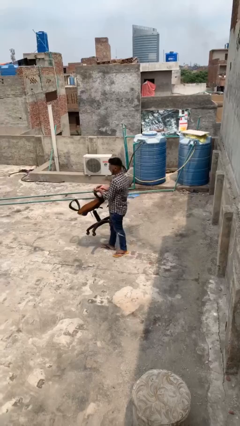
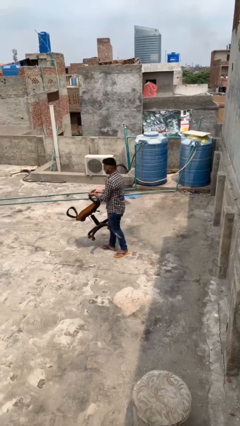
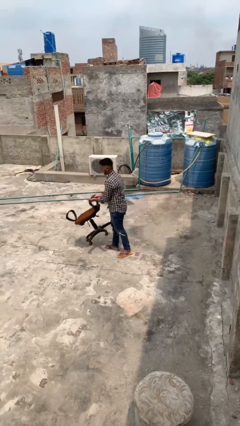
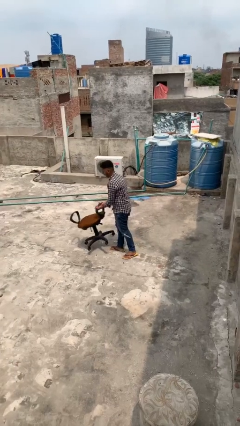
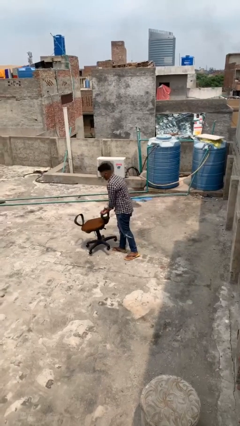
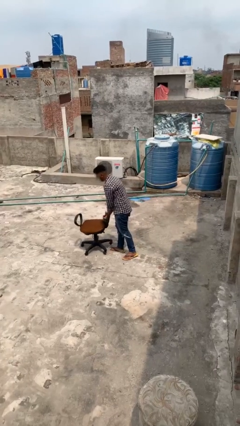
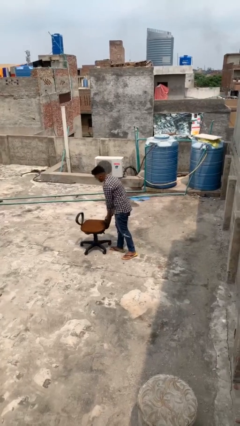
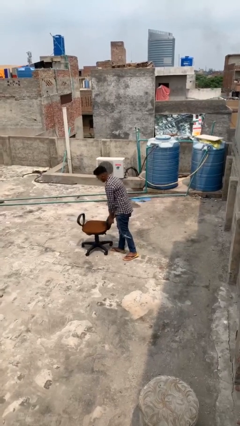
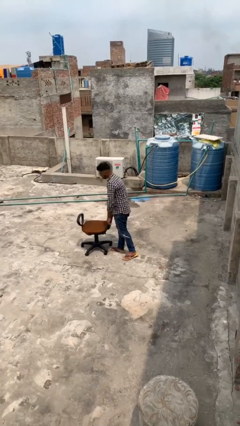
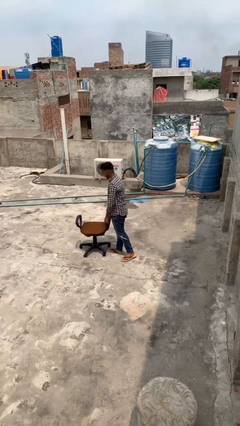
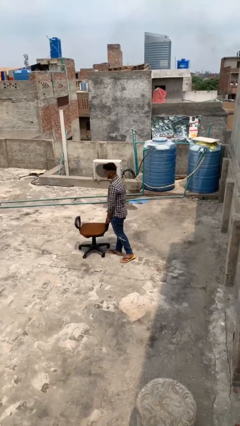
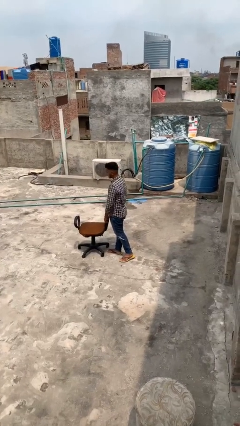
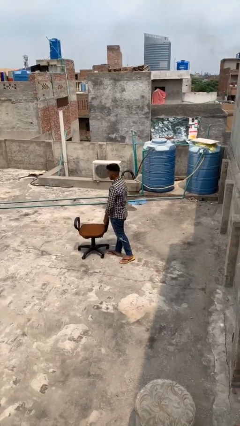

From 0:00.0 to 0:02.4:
person puts down object on floor

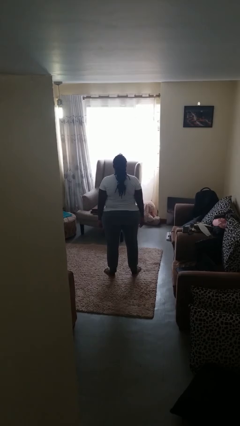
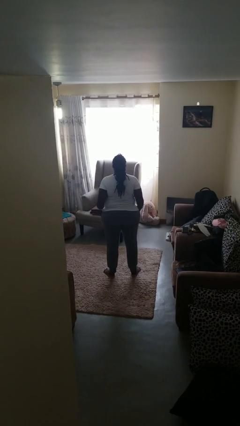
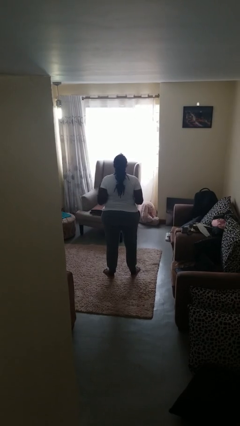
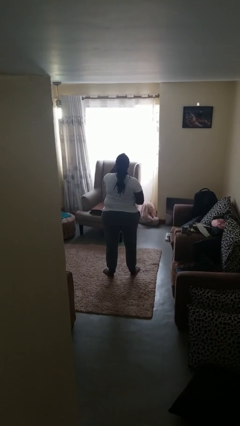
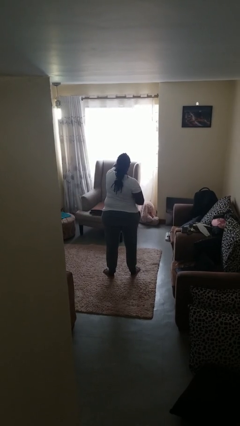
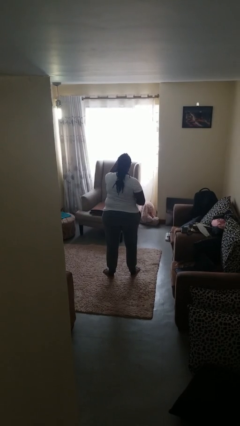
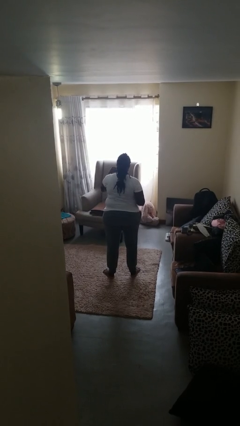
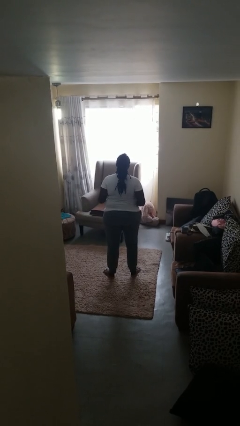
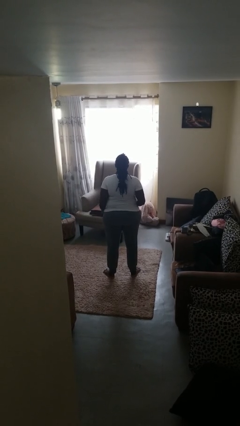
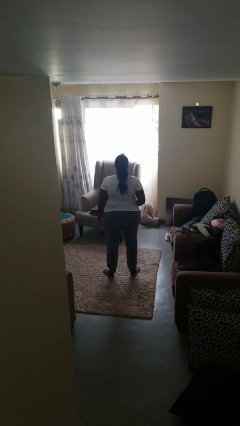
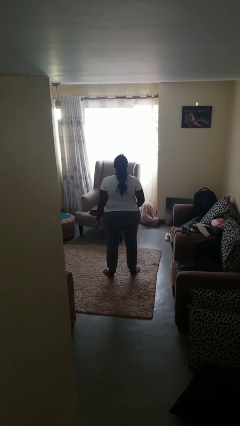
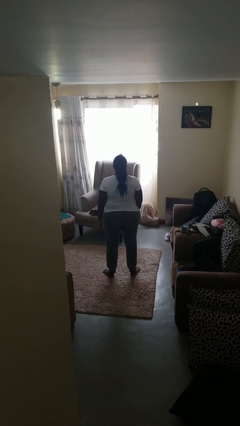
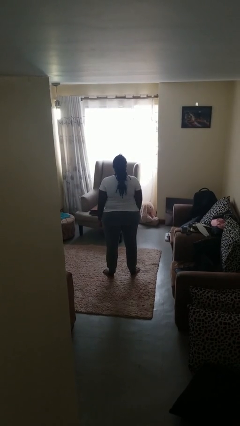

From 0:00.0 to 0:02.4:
person punches

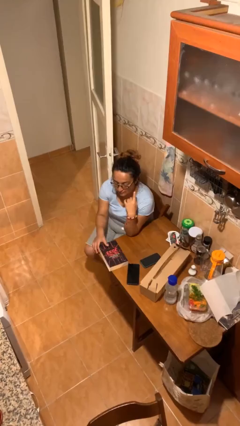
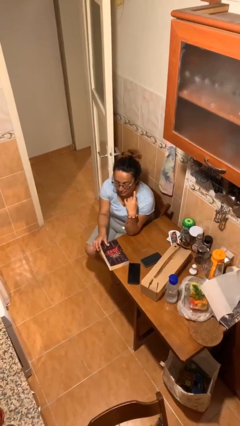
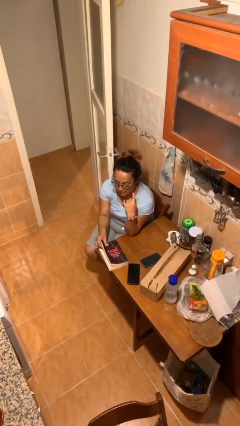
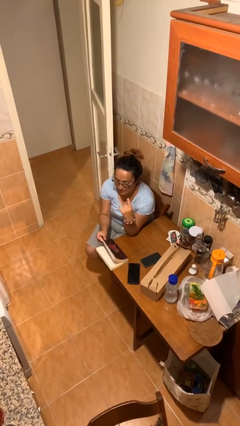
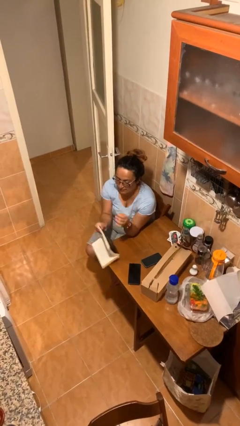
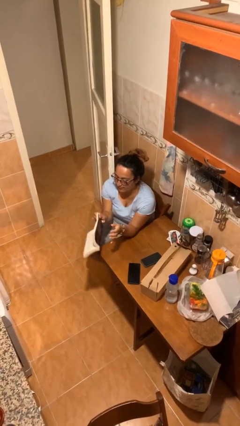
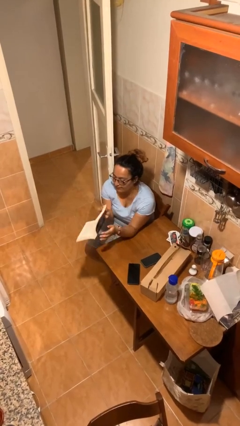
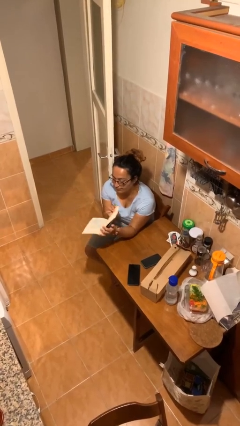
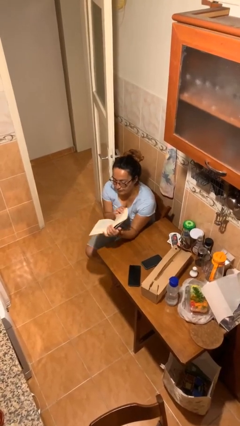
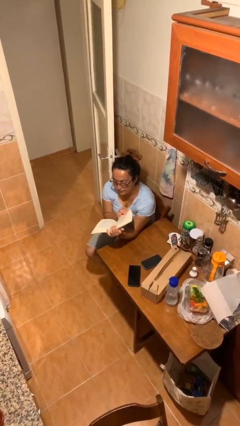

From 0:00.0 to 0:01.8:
person picks up object from table

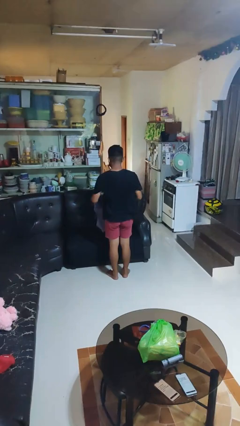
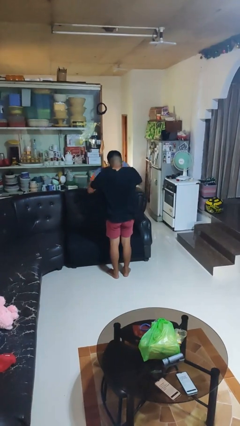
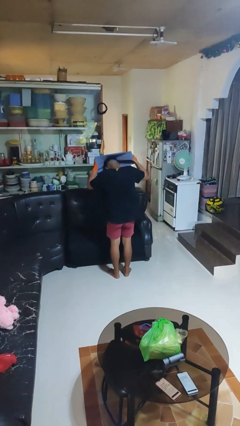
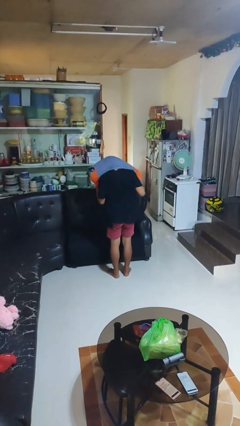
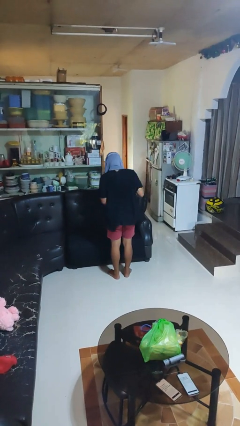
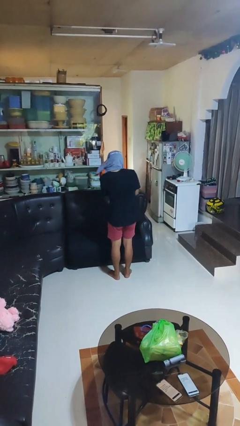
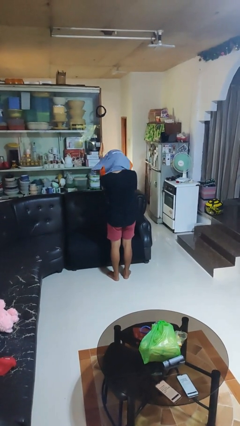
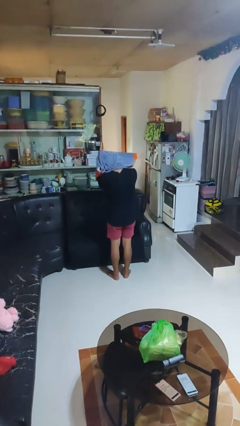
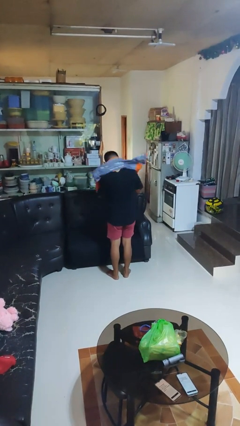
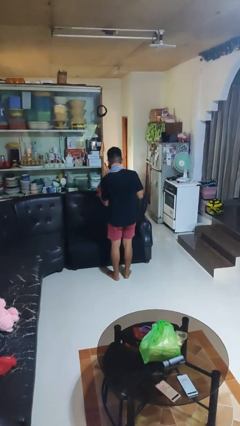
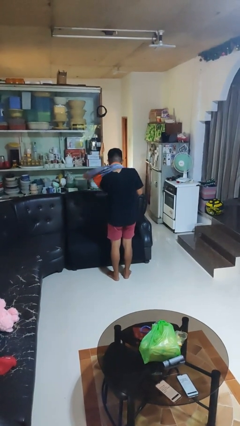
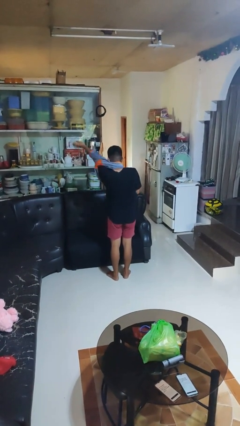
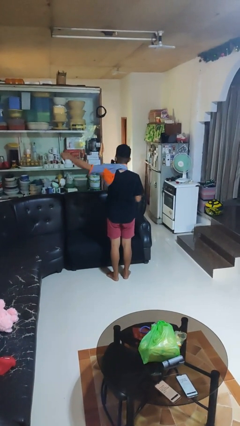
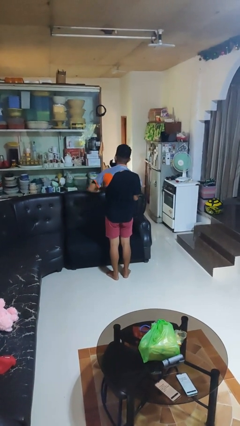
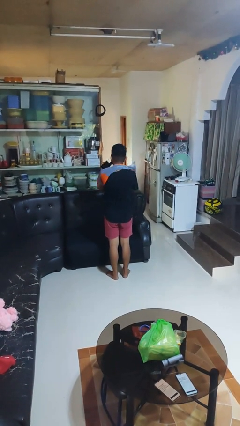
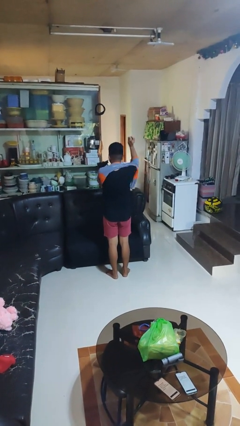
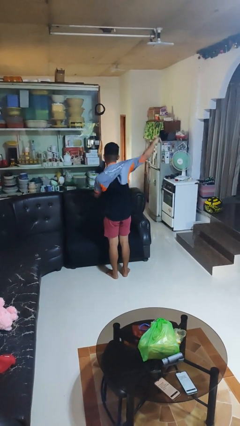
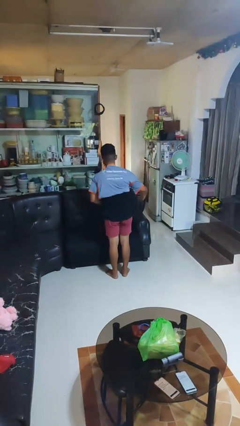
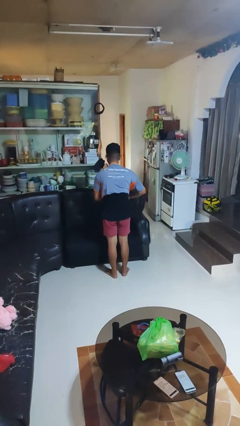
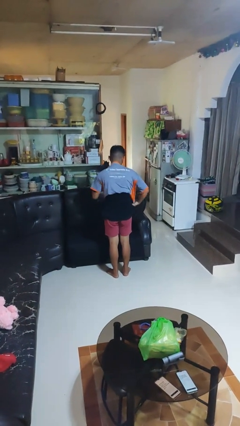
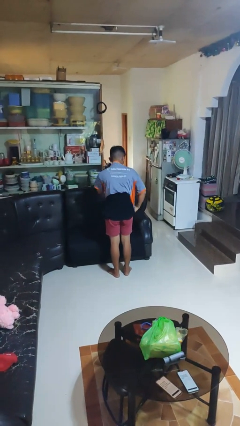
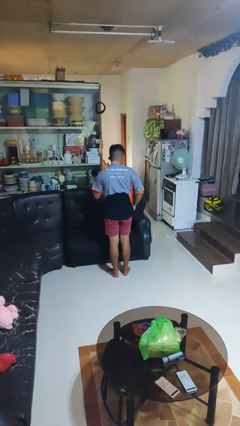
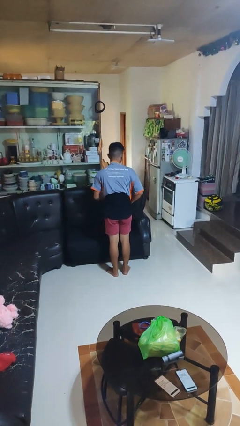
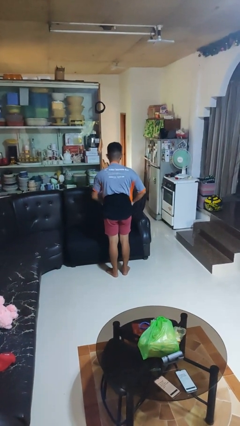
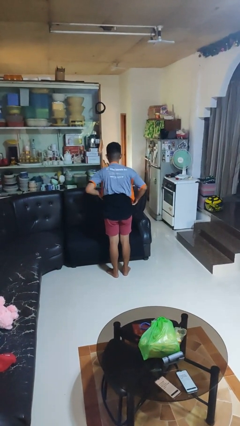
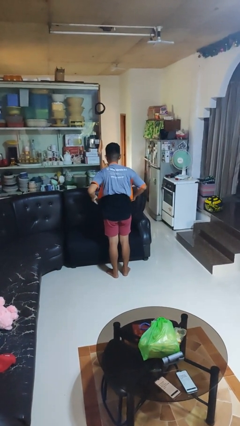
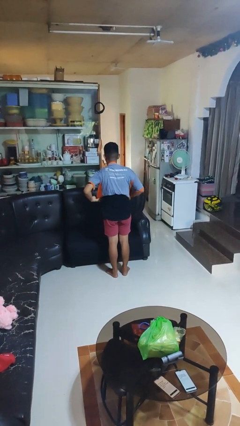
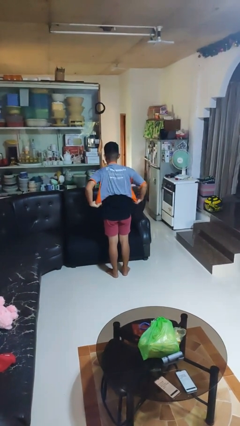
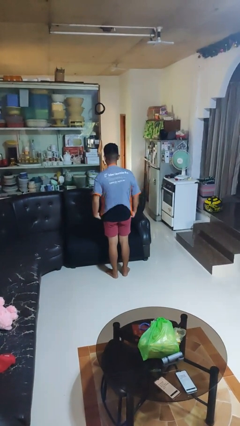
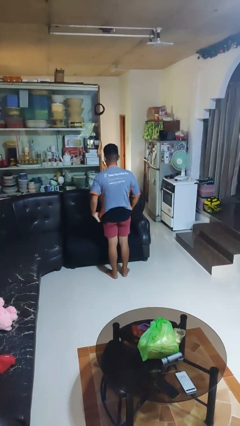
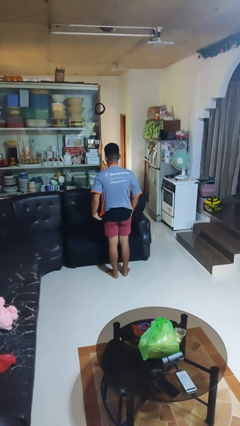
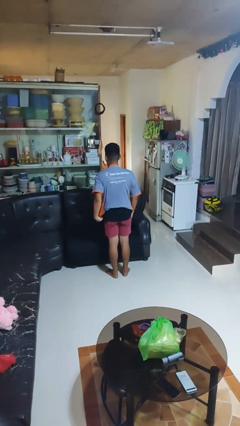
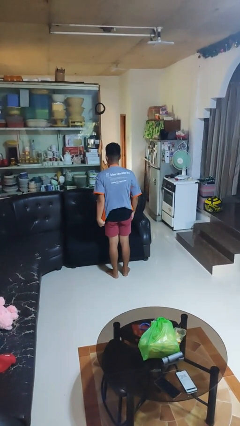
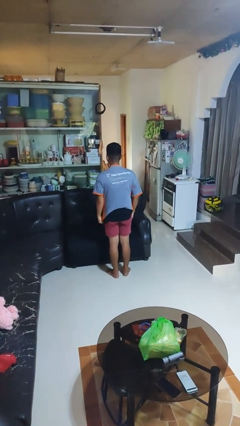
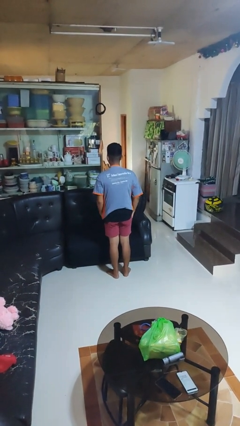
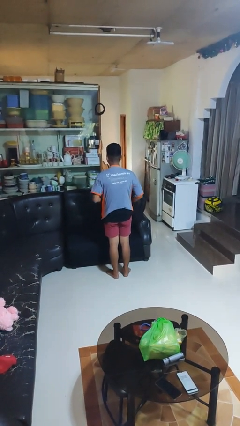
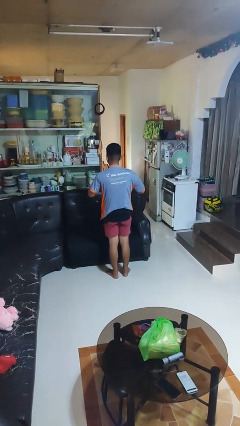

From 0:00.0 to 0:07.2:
person puts on shirt

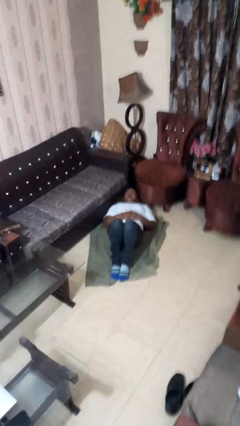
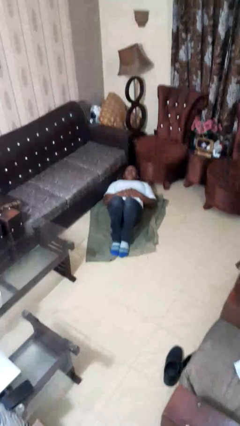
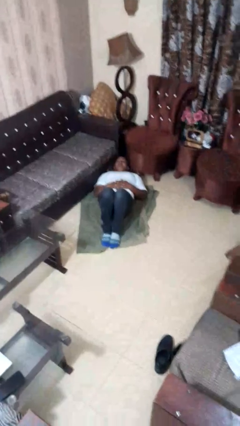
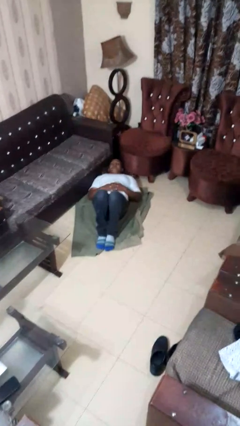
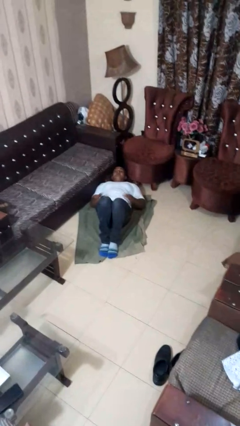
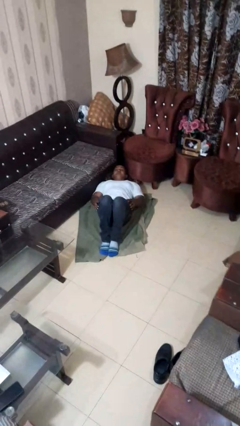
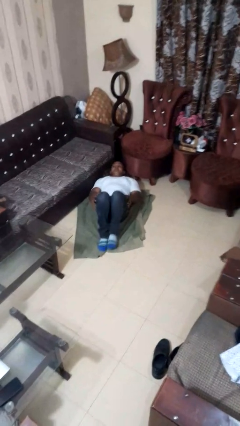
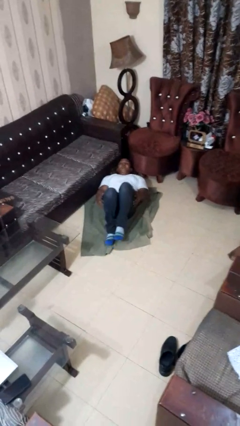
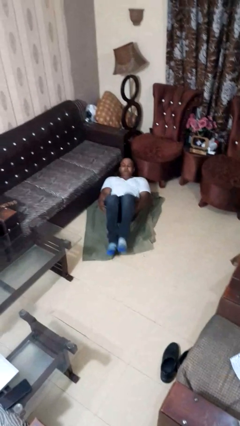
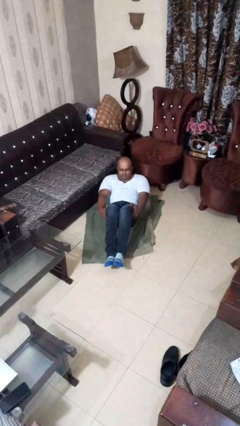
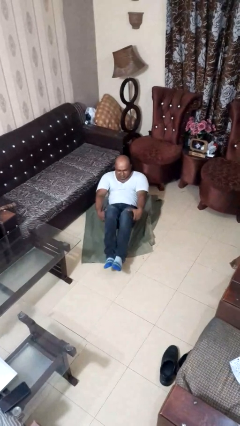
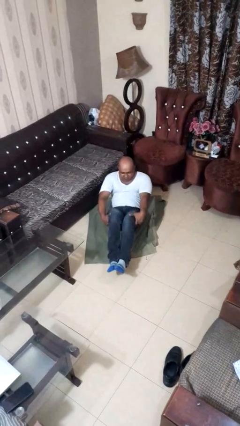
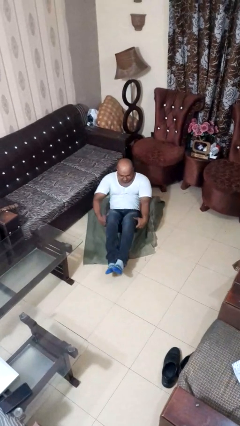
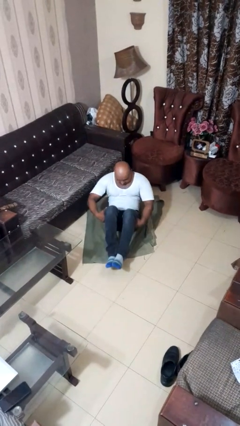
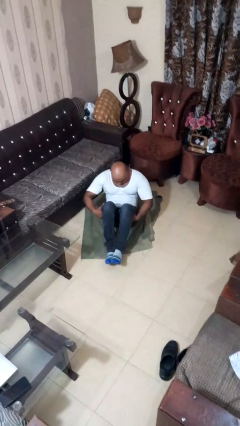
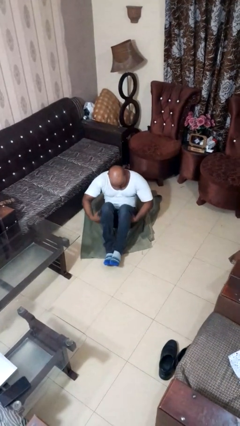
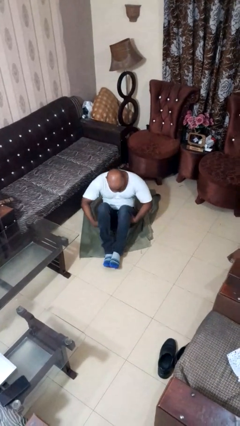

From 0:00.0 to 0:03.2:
person exercises with situp

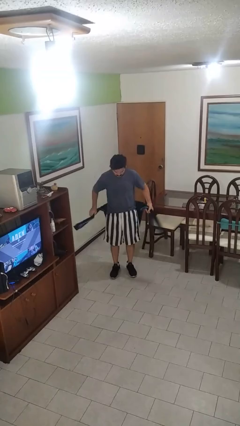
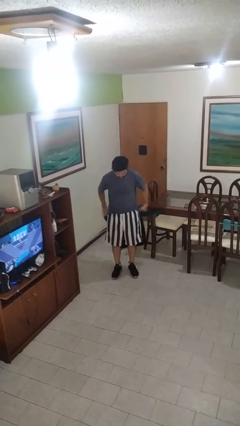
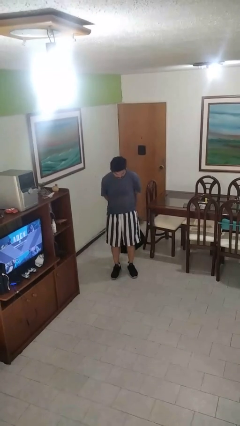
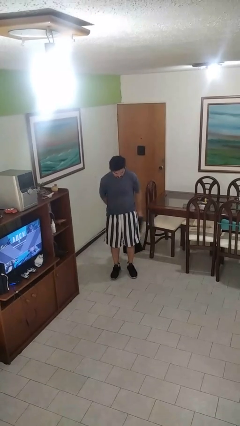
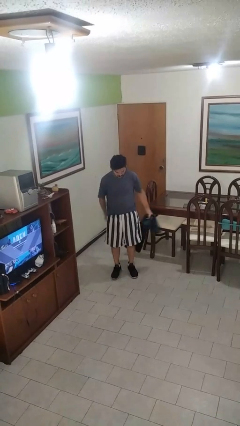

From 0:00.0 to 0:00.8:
person unties jacket around waist
